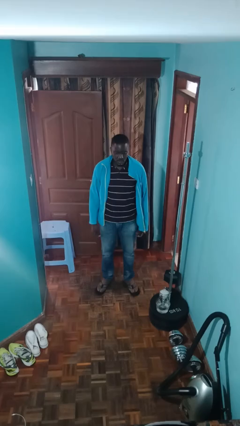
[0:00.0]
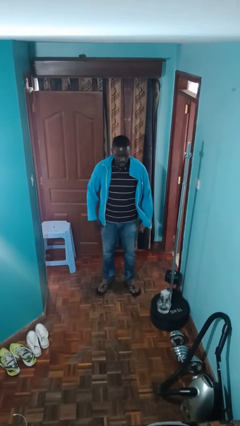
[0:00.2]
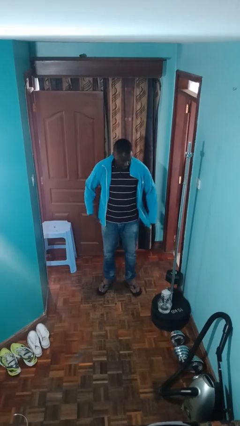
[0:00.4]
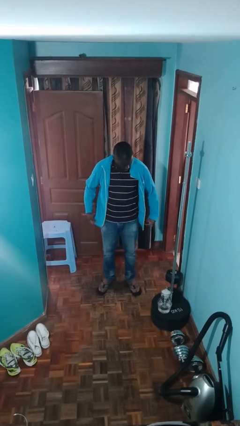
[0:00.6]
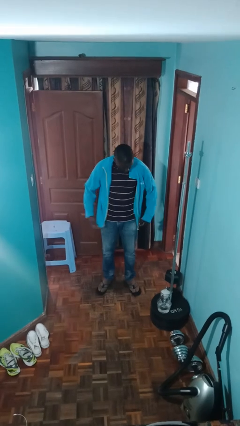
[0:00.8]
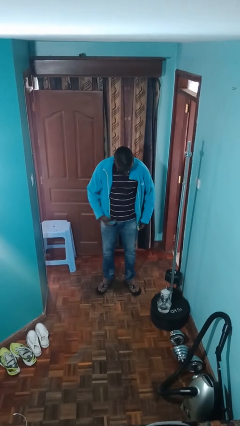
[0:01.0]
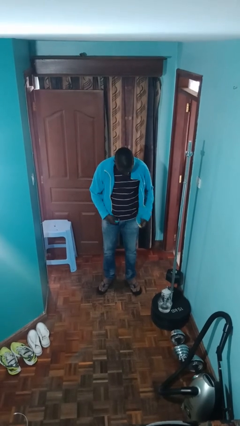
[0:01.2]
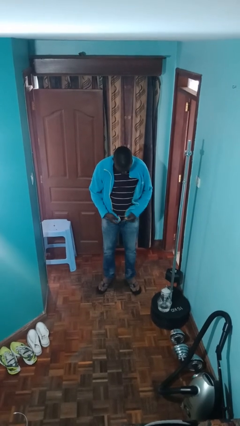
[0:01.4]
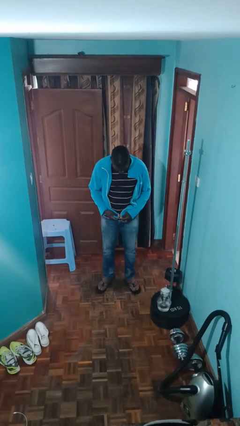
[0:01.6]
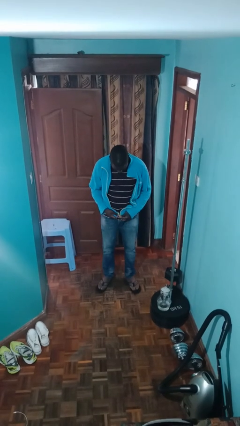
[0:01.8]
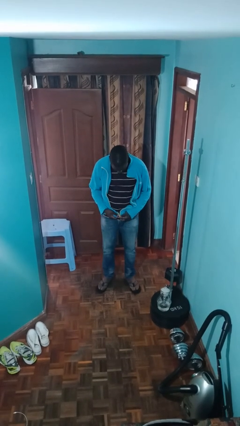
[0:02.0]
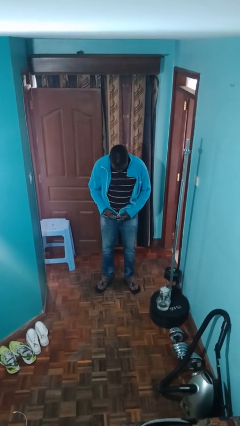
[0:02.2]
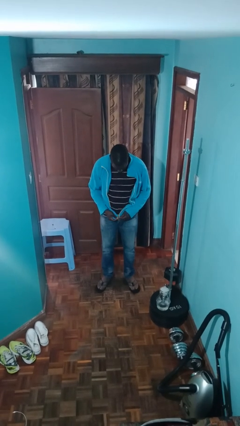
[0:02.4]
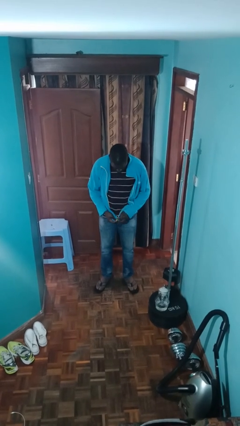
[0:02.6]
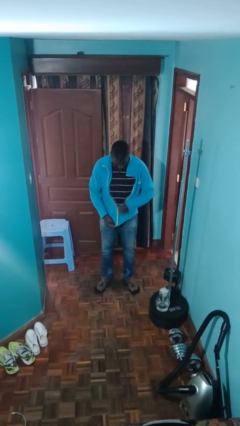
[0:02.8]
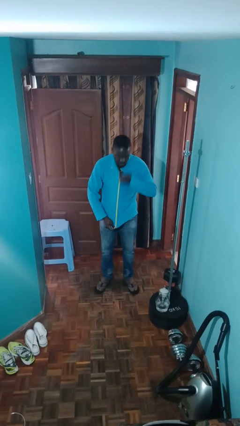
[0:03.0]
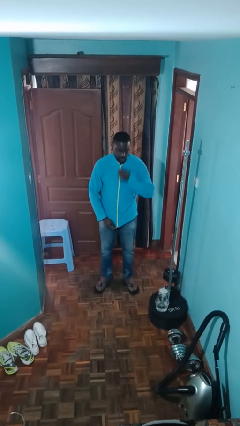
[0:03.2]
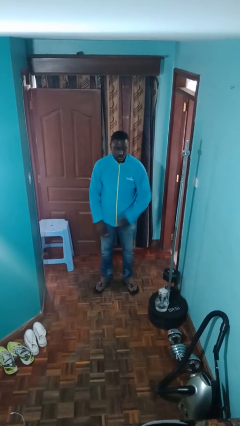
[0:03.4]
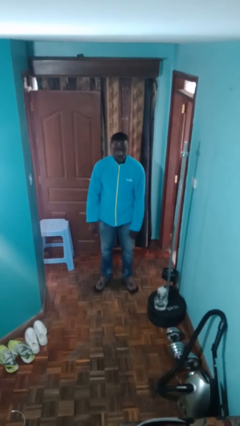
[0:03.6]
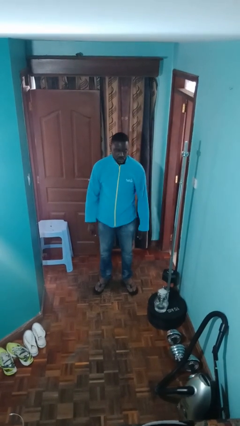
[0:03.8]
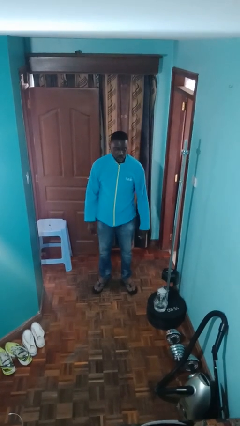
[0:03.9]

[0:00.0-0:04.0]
person zips up jacket

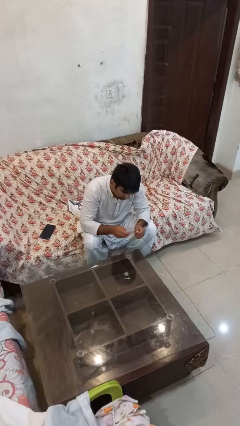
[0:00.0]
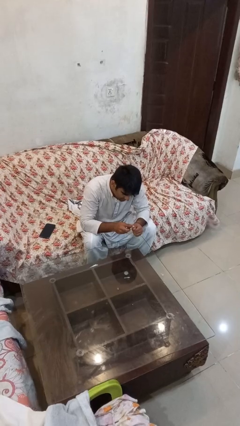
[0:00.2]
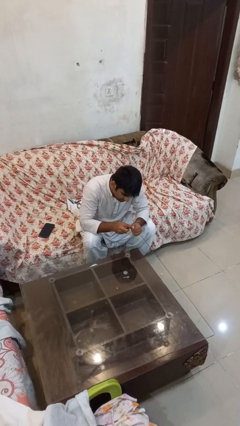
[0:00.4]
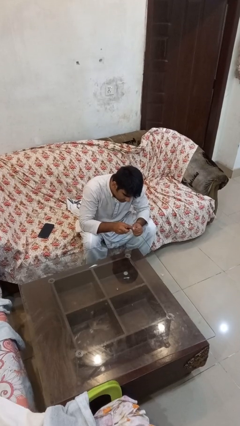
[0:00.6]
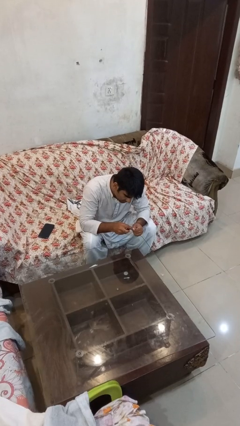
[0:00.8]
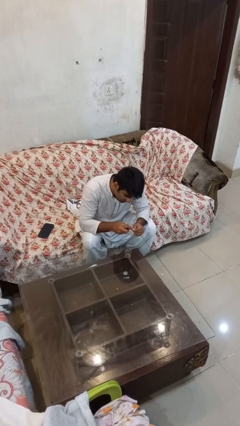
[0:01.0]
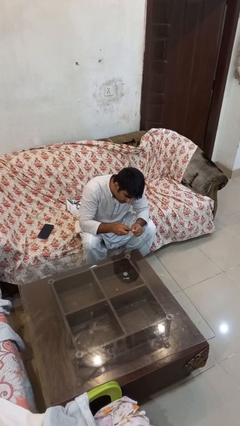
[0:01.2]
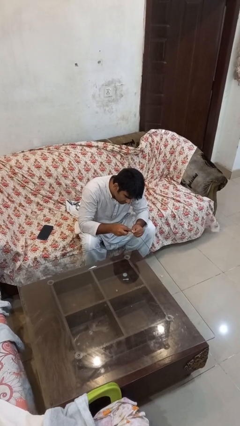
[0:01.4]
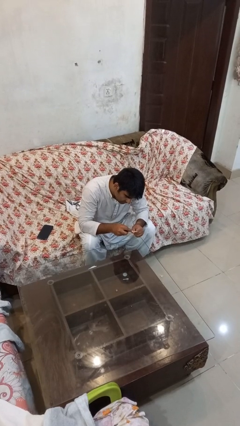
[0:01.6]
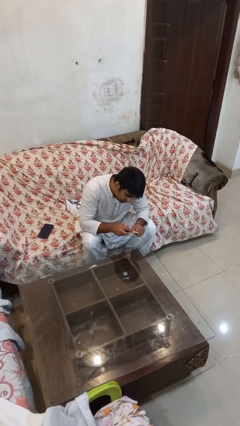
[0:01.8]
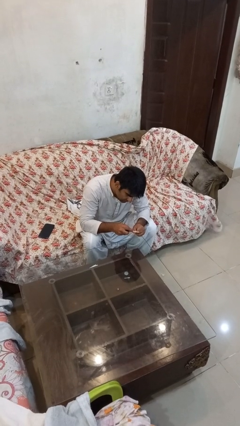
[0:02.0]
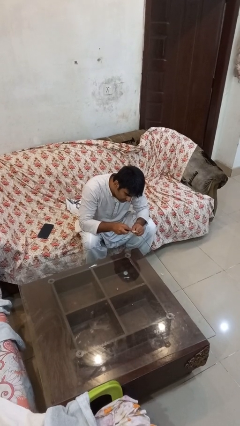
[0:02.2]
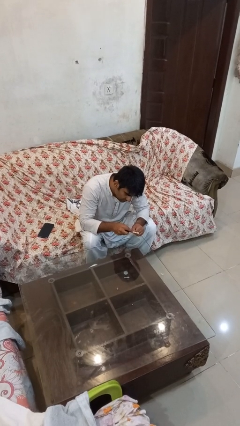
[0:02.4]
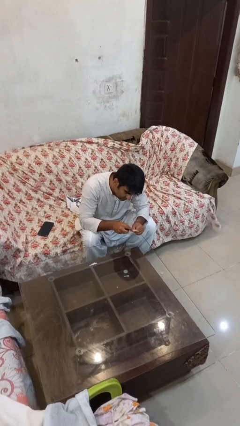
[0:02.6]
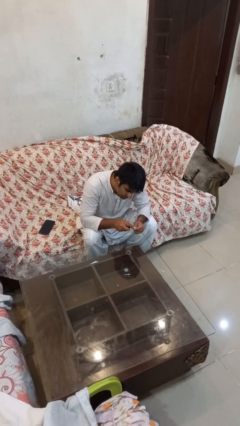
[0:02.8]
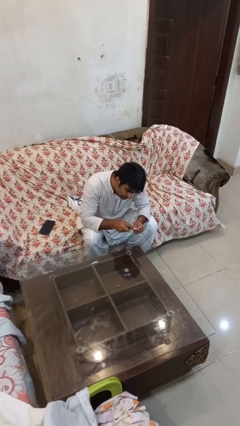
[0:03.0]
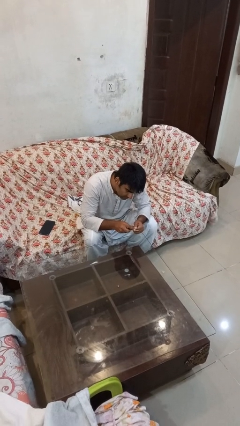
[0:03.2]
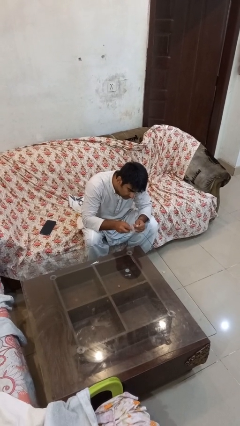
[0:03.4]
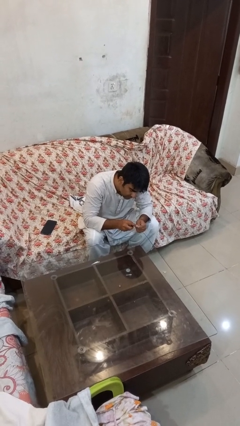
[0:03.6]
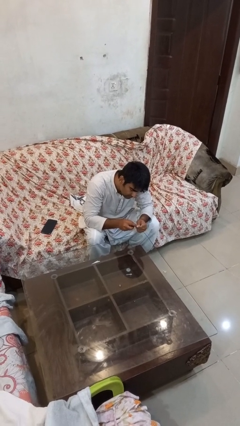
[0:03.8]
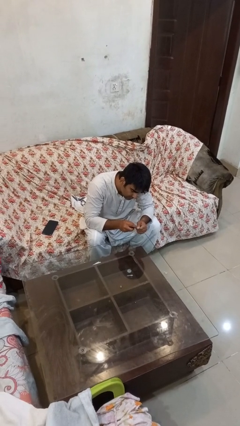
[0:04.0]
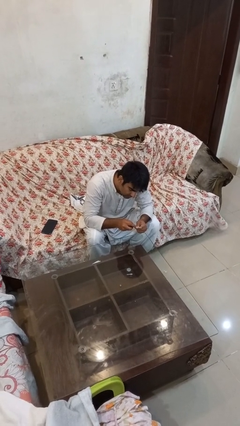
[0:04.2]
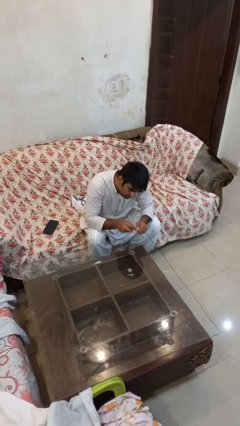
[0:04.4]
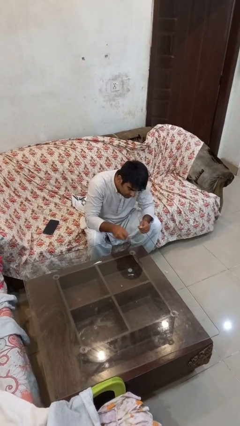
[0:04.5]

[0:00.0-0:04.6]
person files fingernails

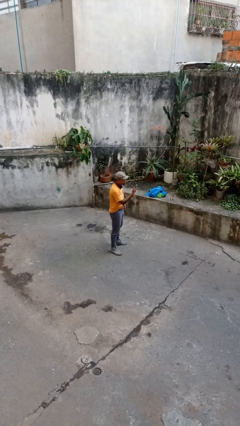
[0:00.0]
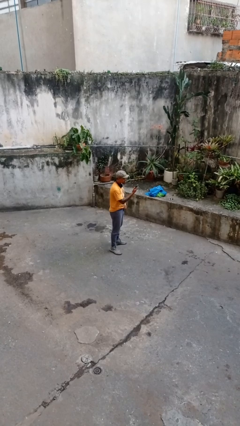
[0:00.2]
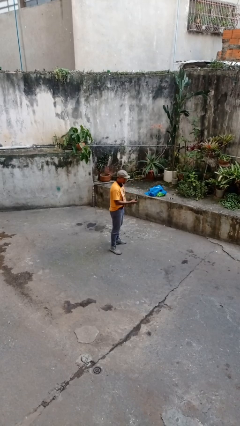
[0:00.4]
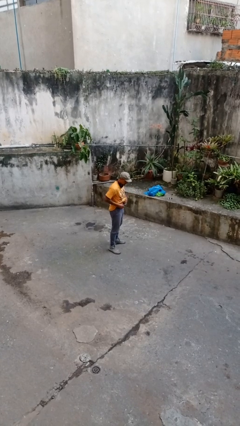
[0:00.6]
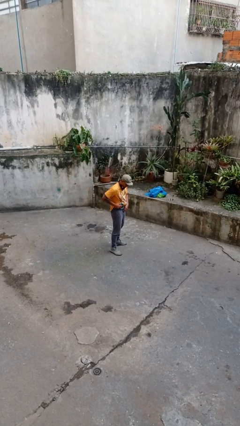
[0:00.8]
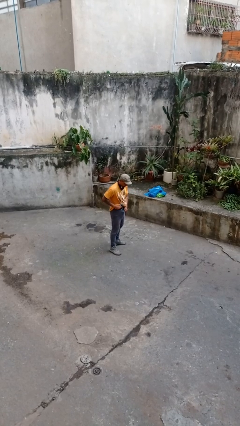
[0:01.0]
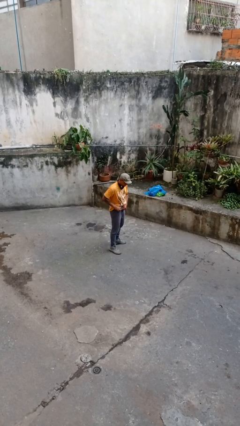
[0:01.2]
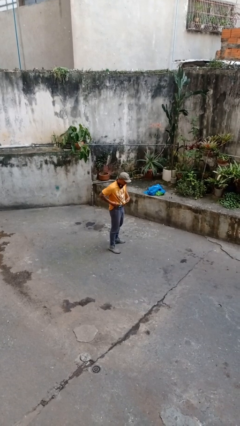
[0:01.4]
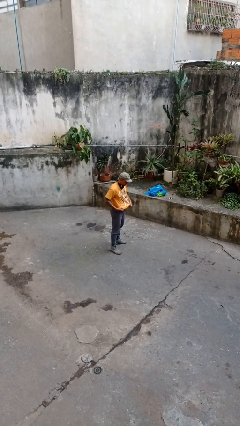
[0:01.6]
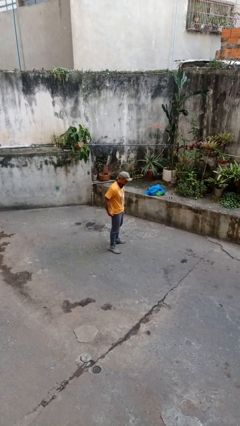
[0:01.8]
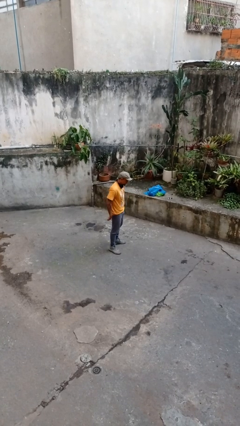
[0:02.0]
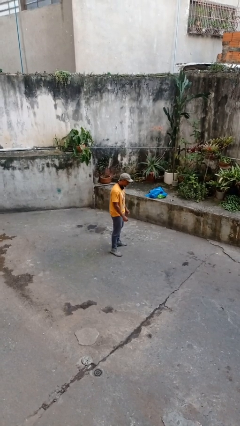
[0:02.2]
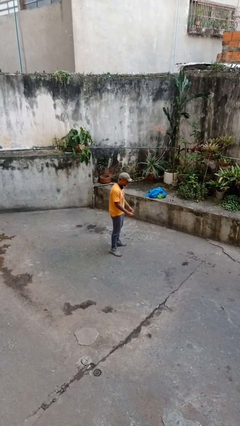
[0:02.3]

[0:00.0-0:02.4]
person puts phone into pocket

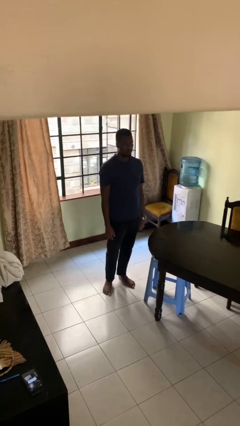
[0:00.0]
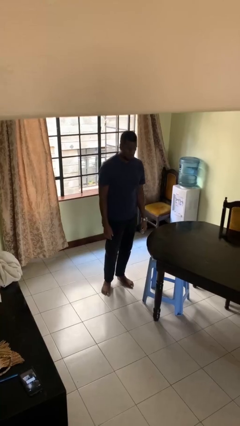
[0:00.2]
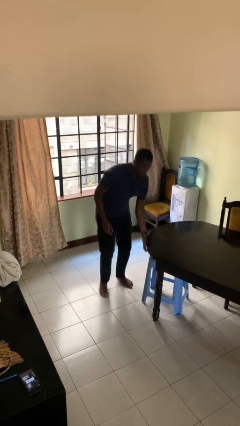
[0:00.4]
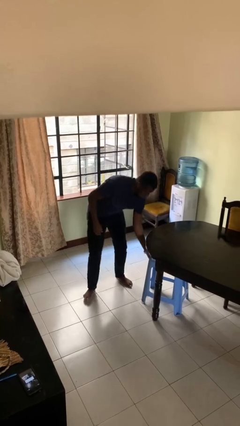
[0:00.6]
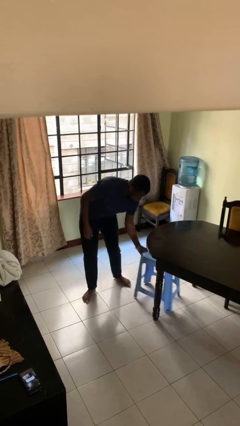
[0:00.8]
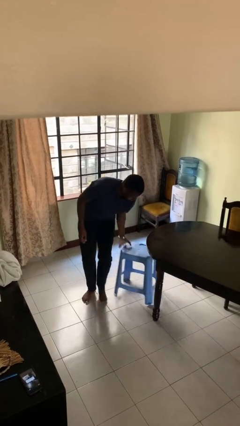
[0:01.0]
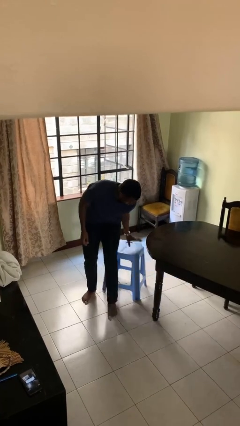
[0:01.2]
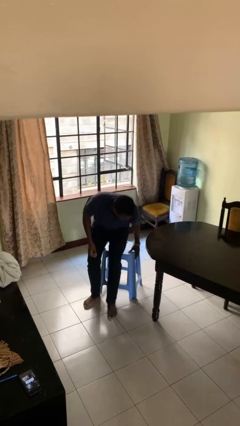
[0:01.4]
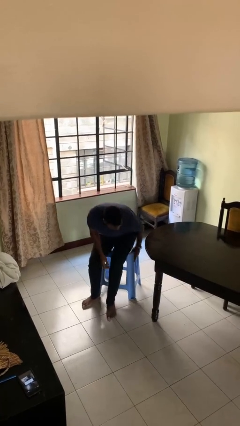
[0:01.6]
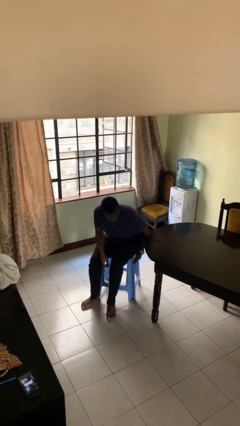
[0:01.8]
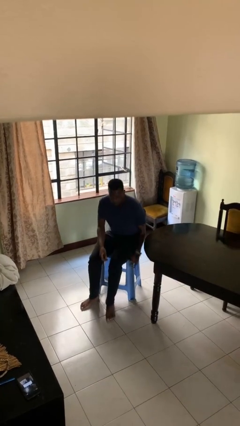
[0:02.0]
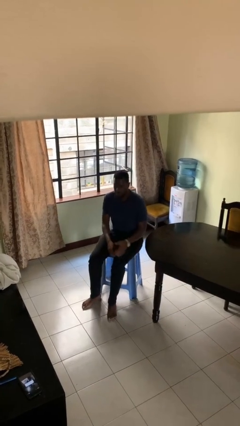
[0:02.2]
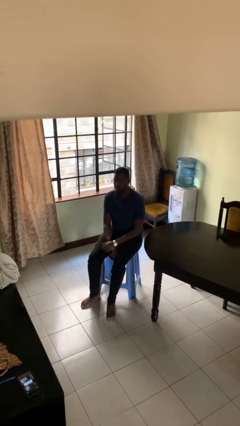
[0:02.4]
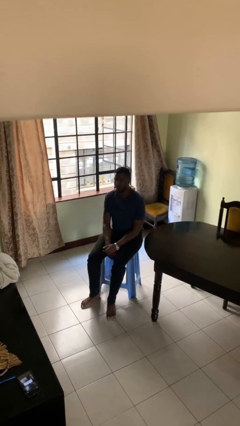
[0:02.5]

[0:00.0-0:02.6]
person sits down

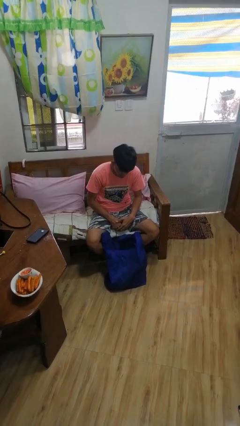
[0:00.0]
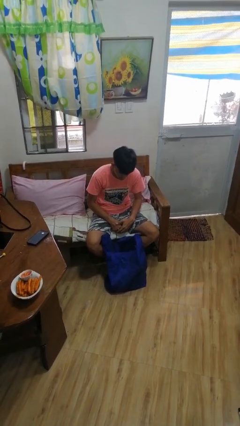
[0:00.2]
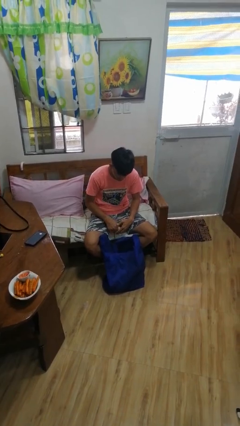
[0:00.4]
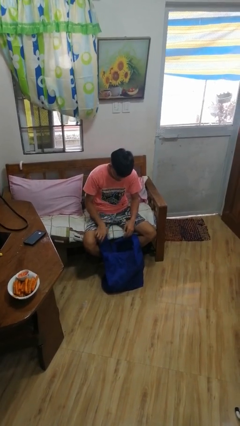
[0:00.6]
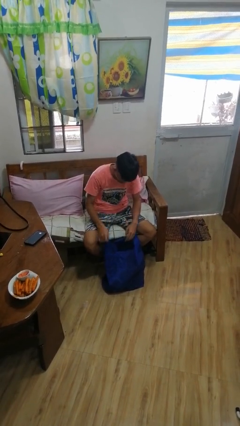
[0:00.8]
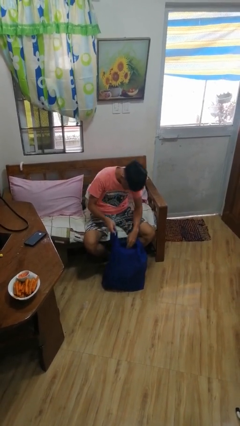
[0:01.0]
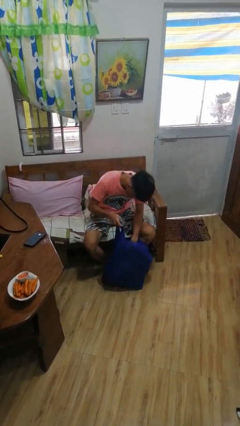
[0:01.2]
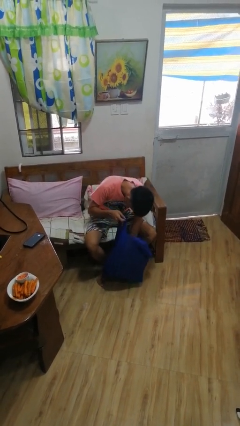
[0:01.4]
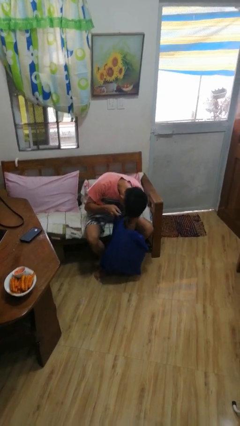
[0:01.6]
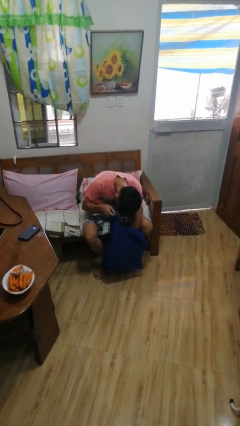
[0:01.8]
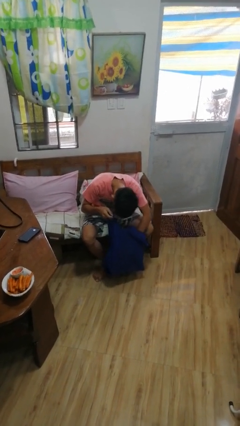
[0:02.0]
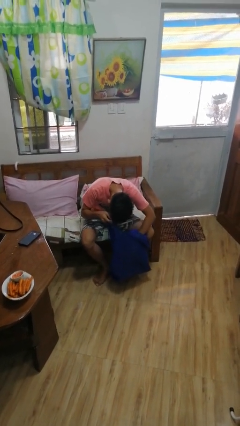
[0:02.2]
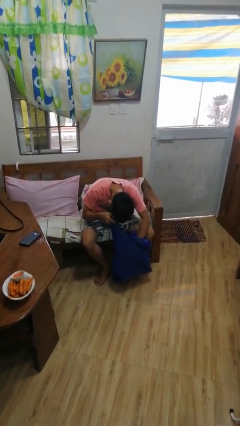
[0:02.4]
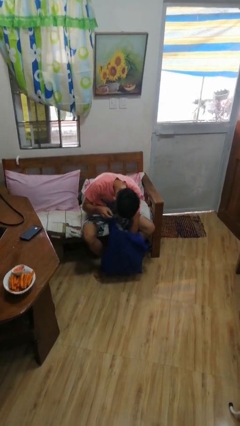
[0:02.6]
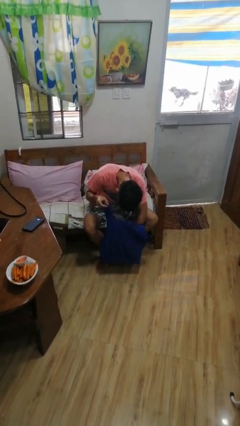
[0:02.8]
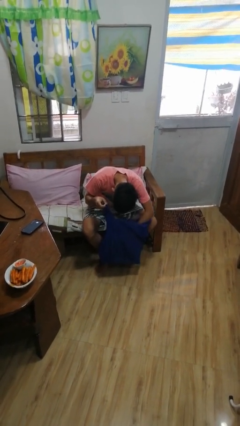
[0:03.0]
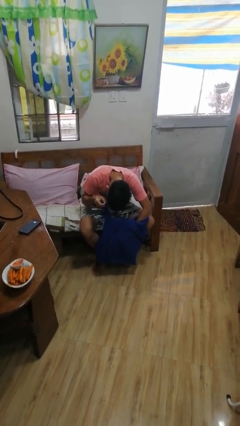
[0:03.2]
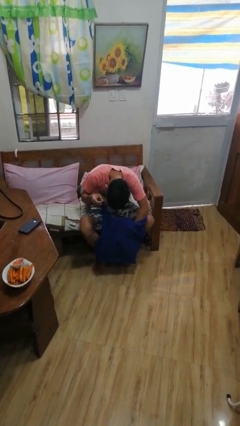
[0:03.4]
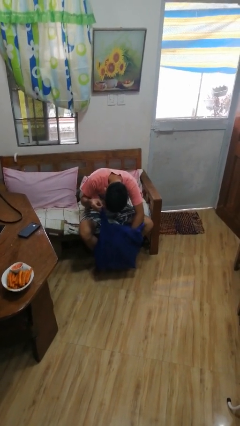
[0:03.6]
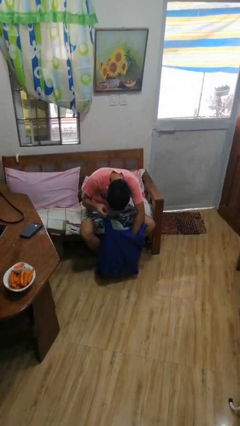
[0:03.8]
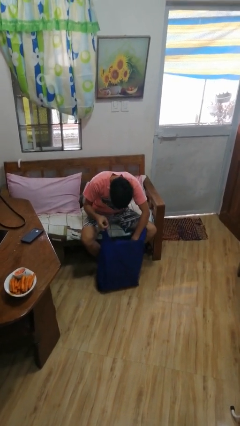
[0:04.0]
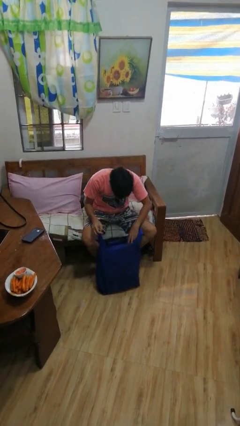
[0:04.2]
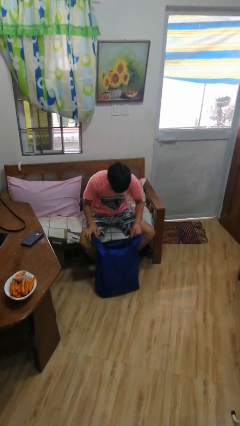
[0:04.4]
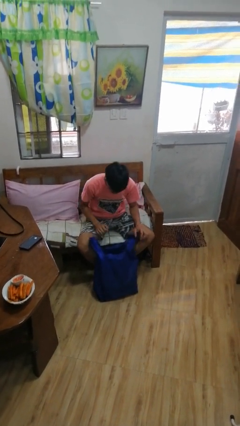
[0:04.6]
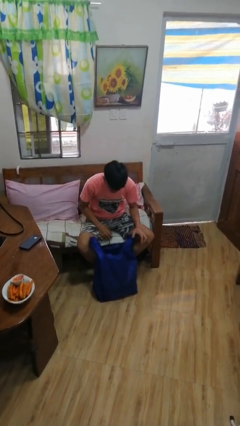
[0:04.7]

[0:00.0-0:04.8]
person searches in bag
